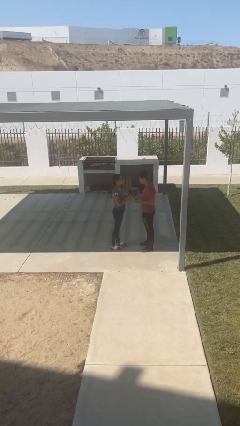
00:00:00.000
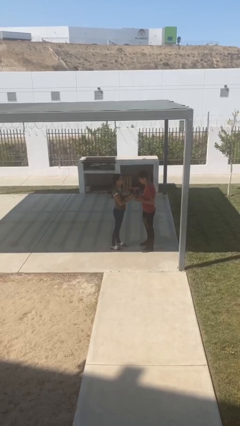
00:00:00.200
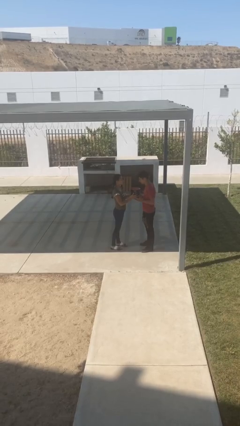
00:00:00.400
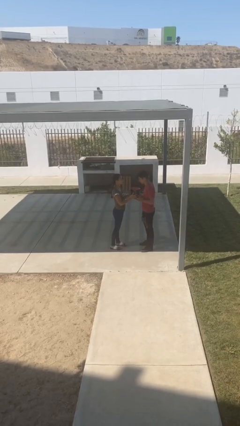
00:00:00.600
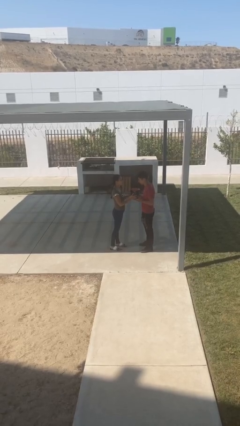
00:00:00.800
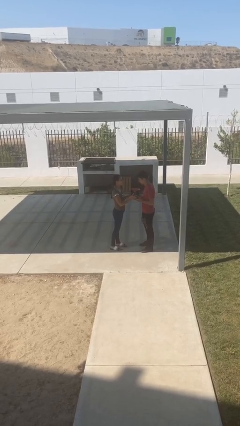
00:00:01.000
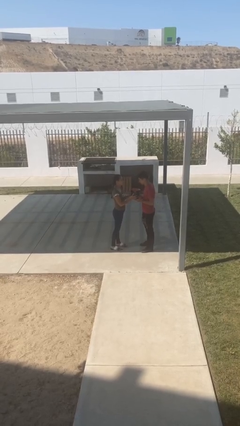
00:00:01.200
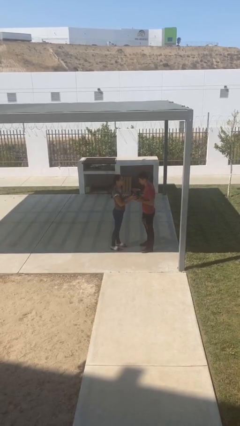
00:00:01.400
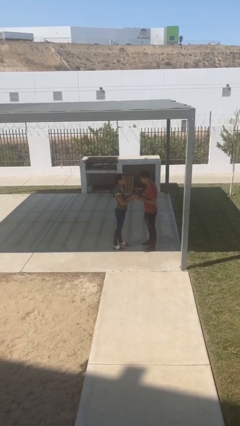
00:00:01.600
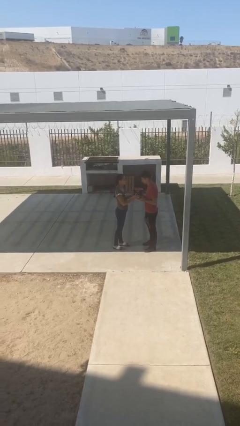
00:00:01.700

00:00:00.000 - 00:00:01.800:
person transfers object to person

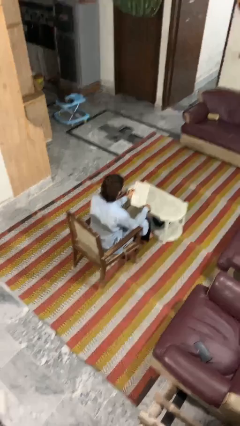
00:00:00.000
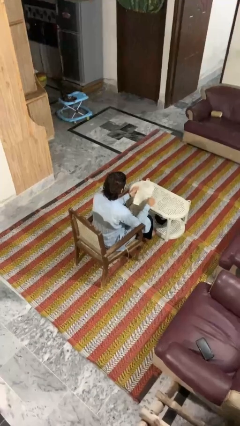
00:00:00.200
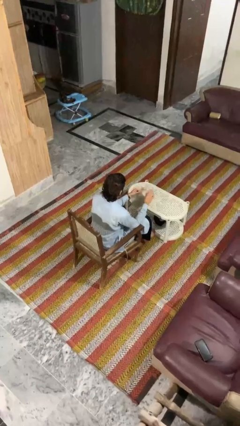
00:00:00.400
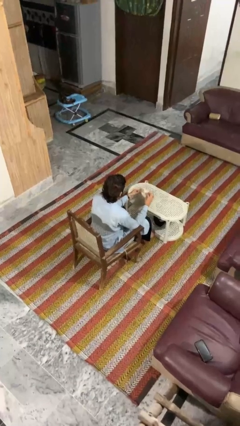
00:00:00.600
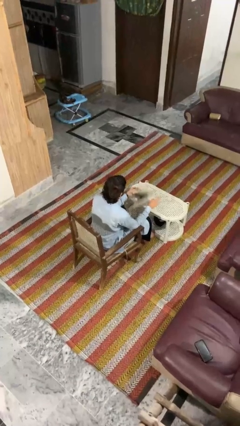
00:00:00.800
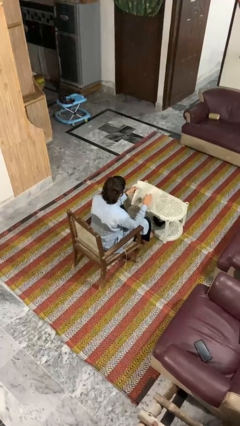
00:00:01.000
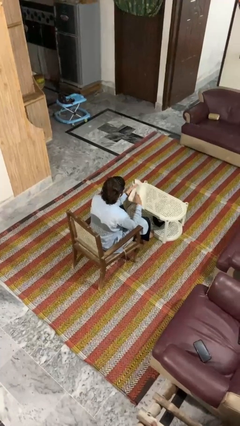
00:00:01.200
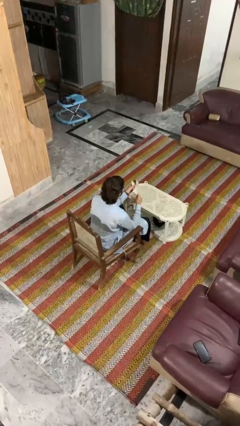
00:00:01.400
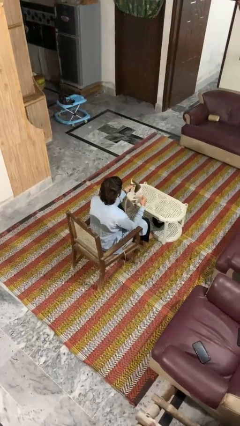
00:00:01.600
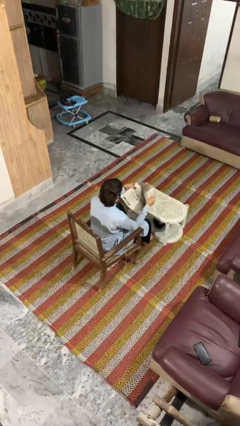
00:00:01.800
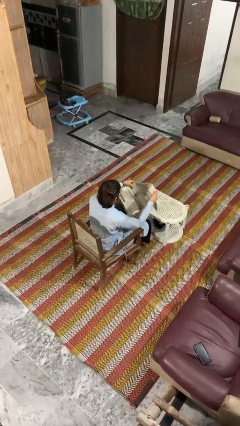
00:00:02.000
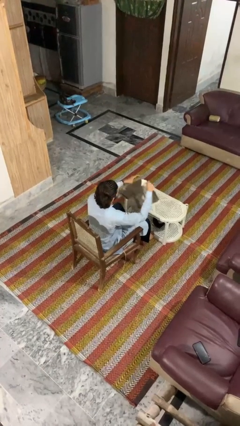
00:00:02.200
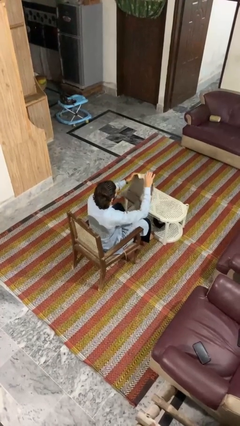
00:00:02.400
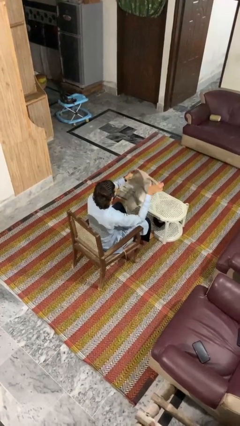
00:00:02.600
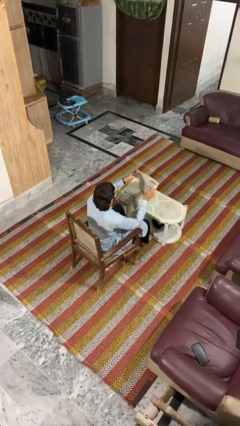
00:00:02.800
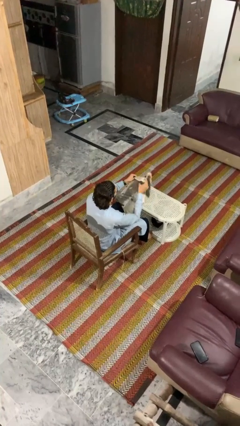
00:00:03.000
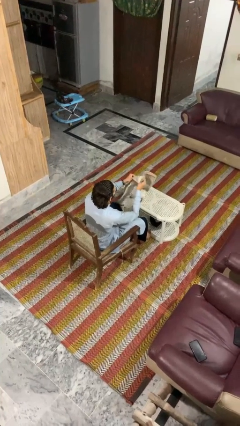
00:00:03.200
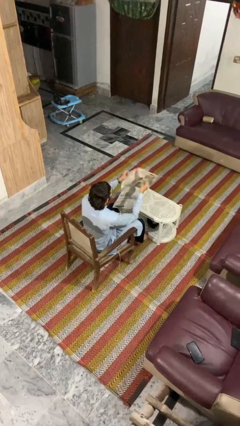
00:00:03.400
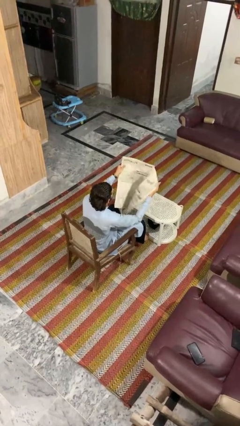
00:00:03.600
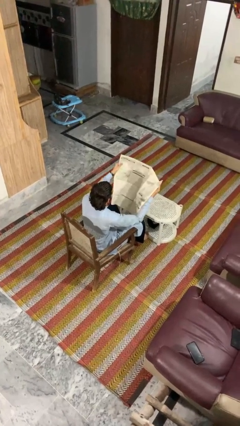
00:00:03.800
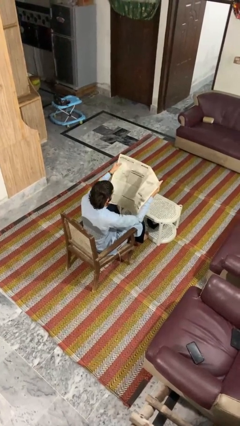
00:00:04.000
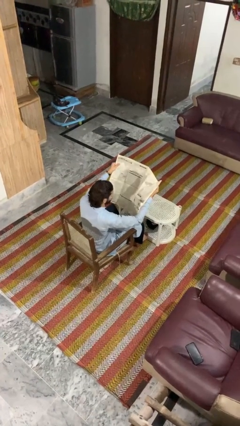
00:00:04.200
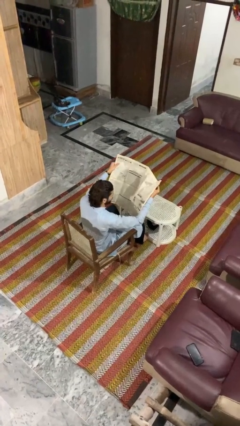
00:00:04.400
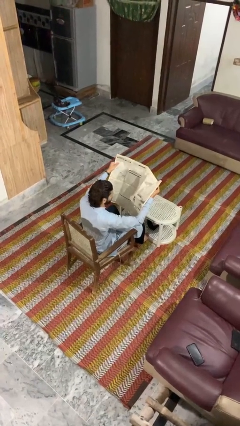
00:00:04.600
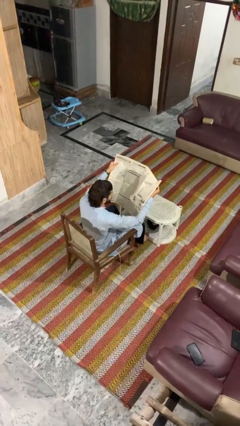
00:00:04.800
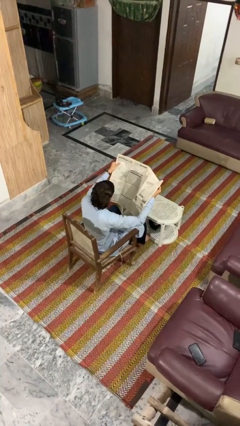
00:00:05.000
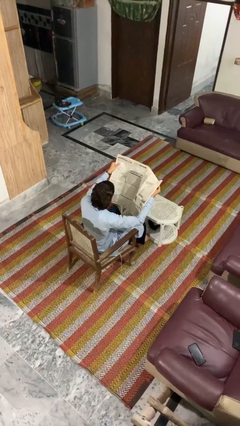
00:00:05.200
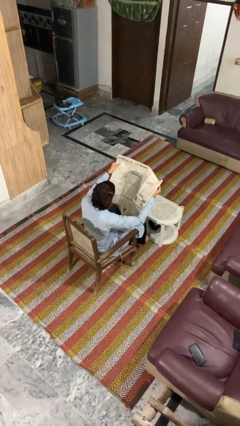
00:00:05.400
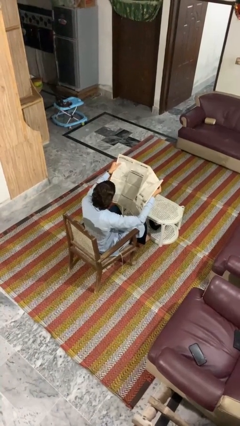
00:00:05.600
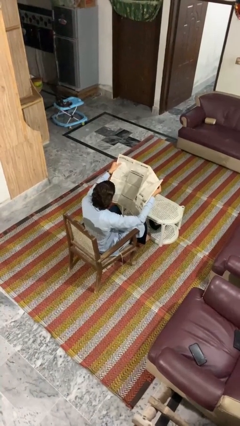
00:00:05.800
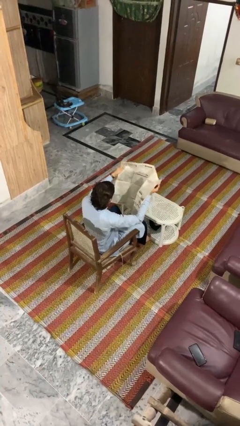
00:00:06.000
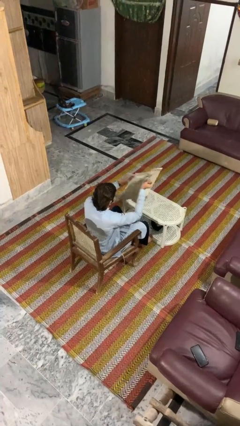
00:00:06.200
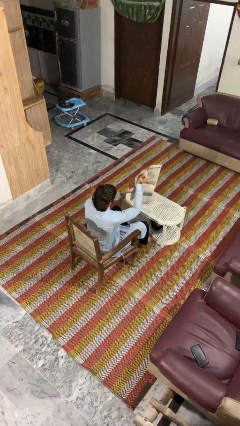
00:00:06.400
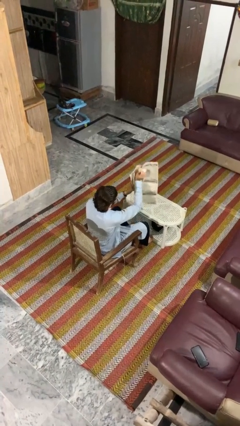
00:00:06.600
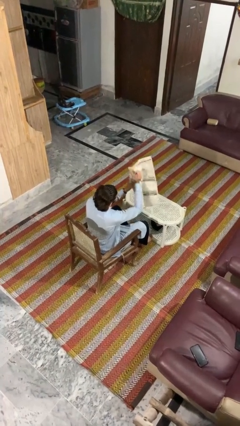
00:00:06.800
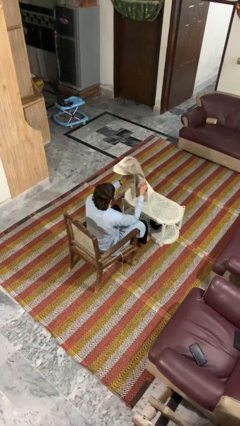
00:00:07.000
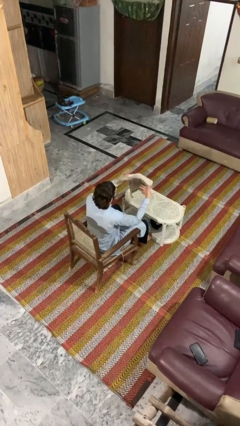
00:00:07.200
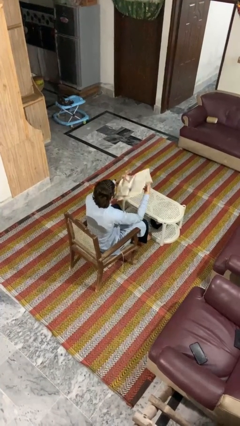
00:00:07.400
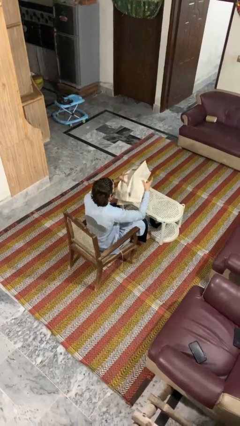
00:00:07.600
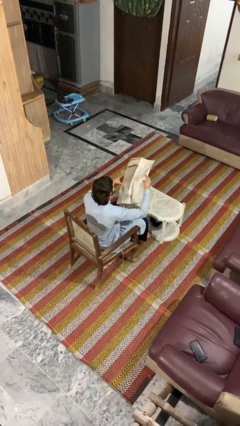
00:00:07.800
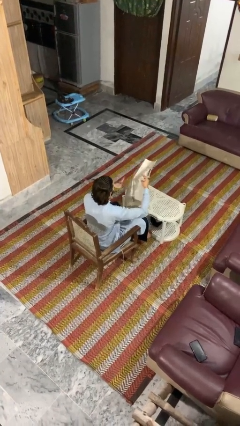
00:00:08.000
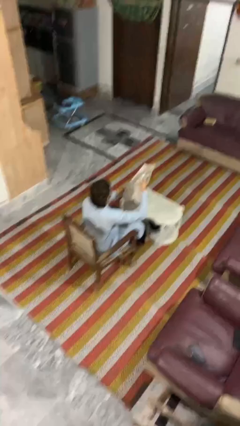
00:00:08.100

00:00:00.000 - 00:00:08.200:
person reads newspaper

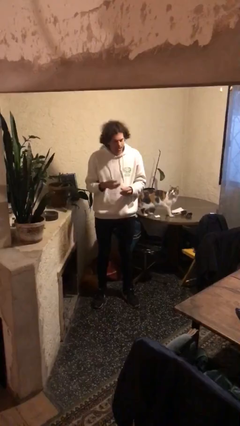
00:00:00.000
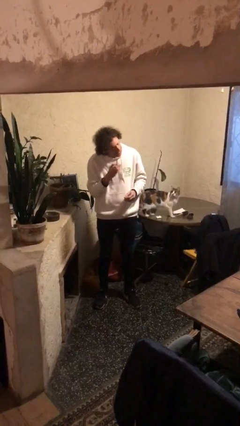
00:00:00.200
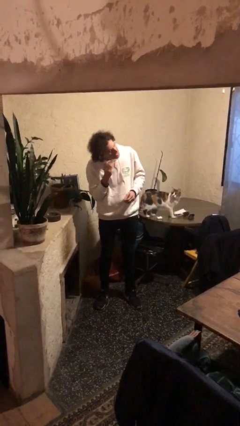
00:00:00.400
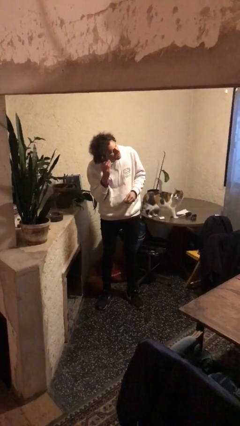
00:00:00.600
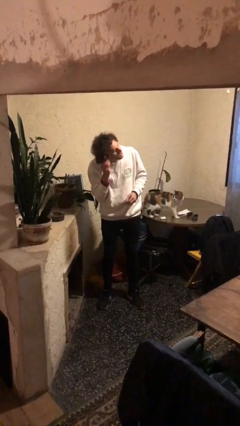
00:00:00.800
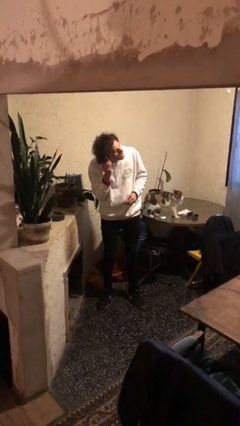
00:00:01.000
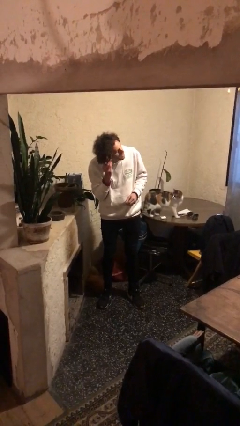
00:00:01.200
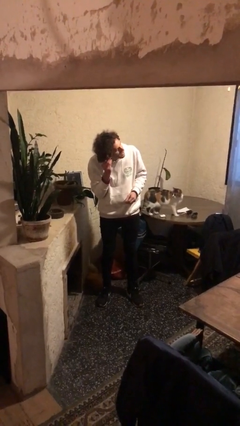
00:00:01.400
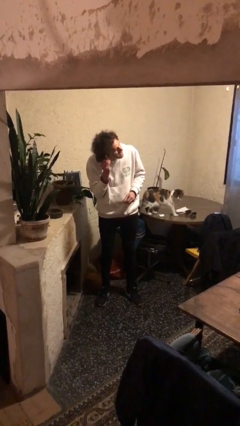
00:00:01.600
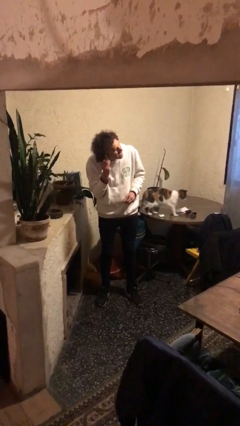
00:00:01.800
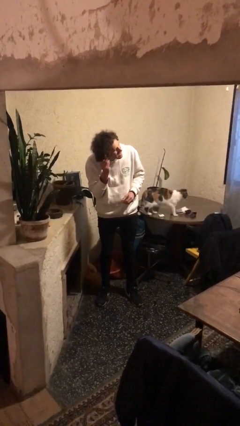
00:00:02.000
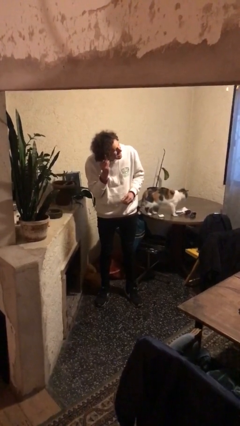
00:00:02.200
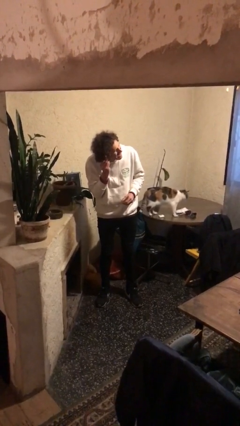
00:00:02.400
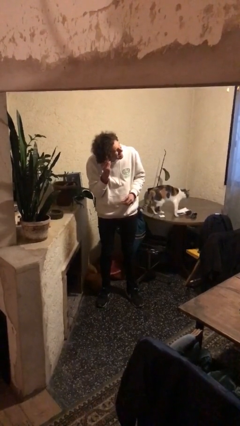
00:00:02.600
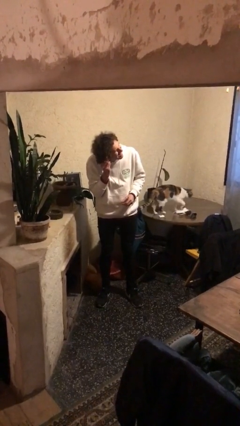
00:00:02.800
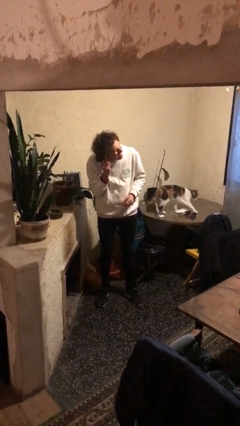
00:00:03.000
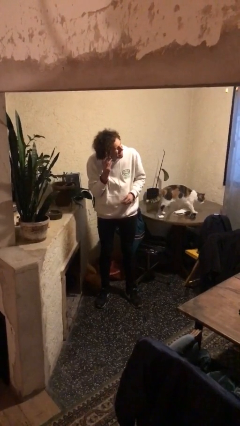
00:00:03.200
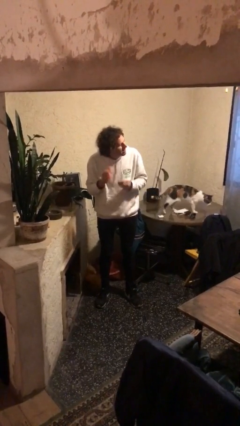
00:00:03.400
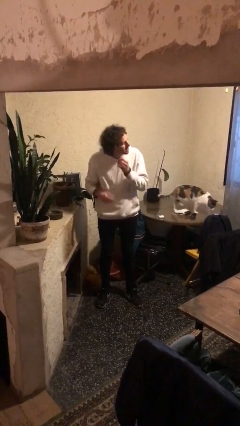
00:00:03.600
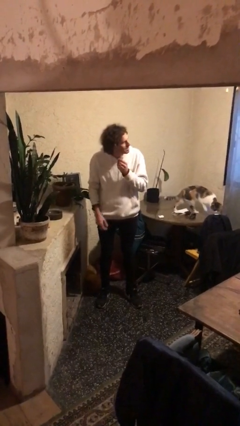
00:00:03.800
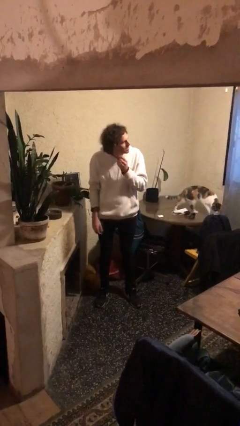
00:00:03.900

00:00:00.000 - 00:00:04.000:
person puts on earrings

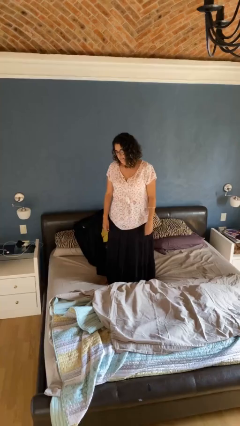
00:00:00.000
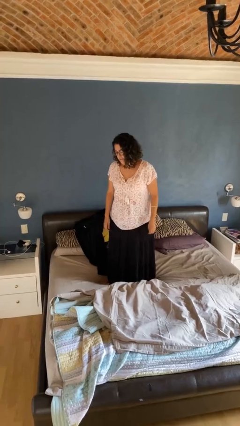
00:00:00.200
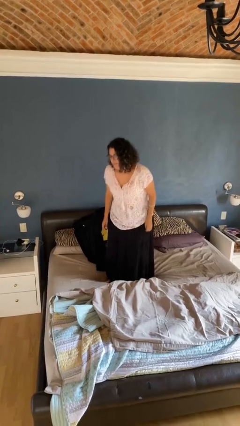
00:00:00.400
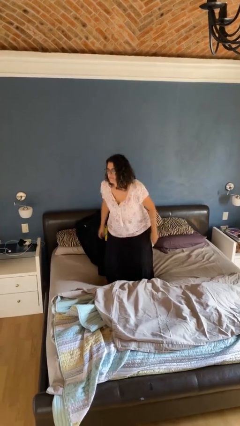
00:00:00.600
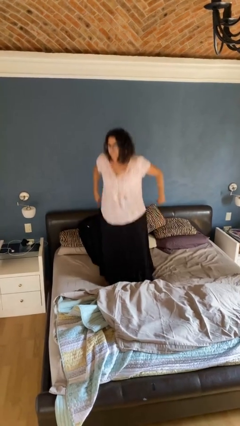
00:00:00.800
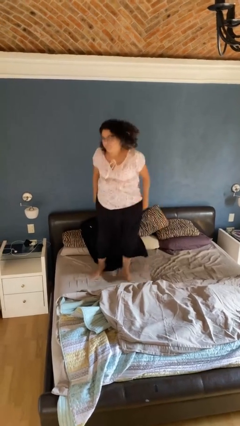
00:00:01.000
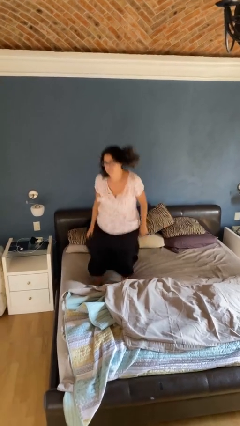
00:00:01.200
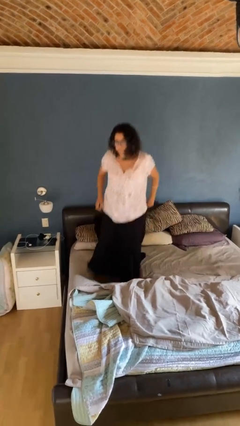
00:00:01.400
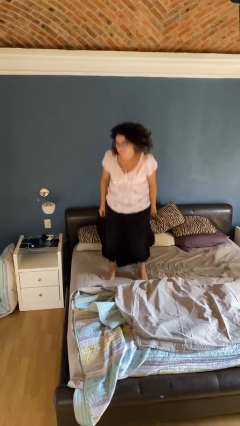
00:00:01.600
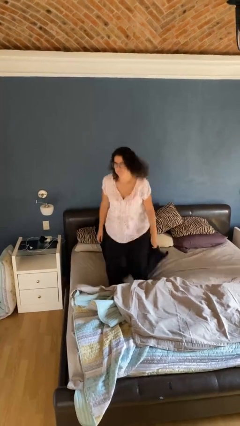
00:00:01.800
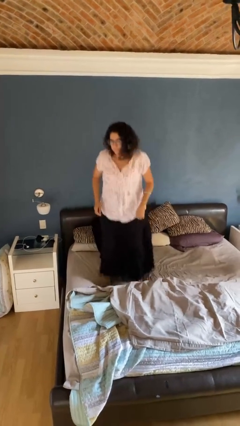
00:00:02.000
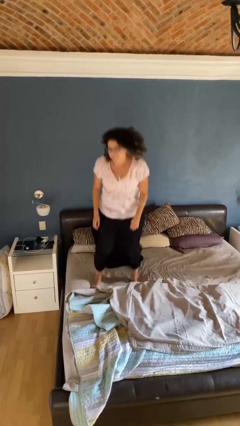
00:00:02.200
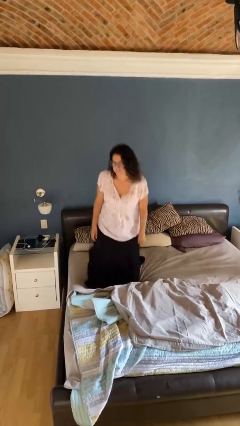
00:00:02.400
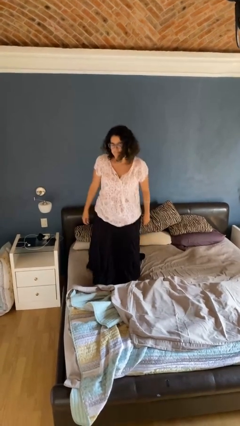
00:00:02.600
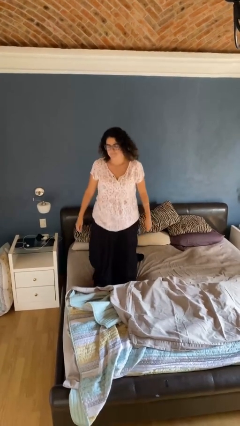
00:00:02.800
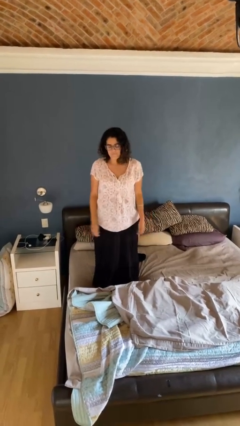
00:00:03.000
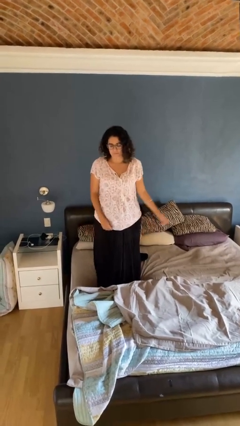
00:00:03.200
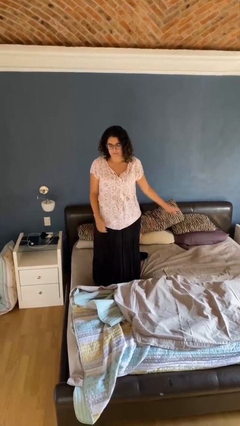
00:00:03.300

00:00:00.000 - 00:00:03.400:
person jumps on bed

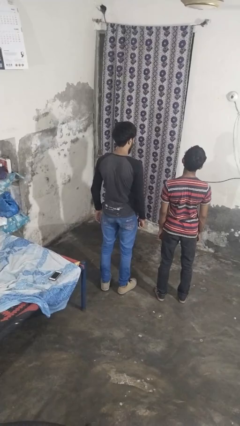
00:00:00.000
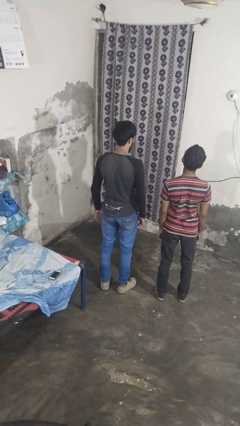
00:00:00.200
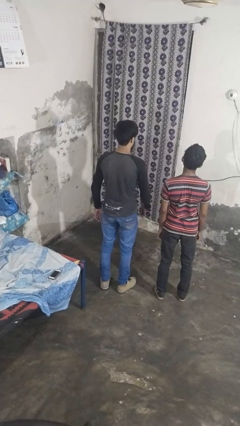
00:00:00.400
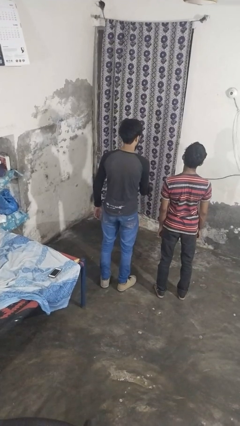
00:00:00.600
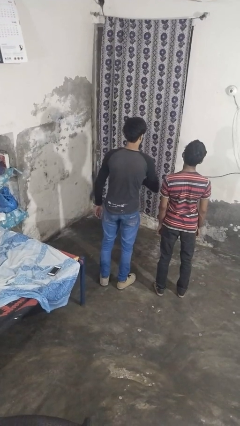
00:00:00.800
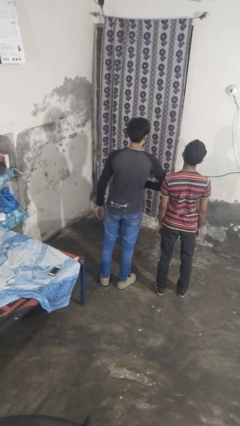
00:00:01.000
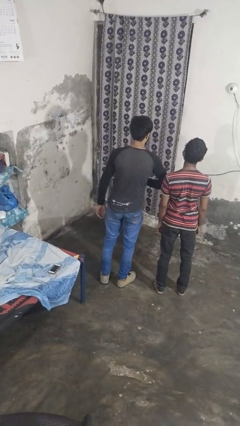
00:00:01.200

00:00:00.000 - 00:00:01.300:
person nudges person with elbow
